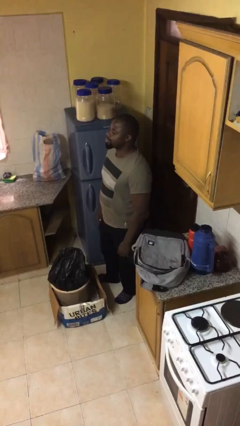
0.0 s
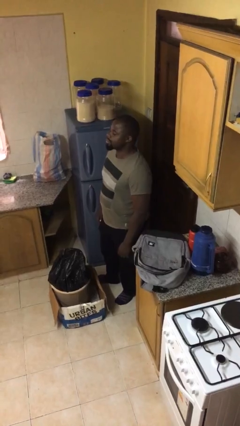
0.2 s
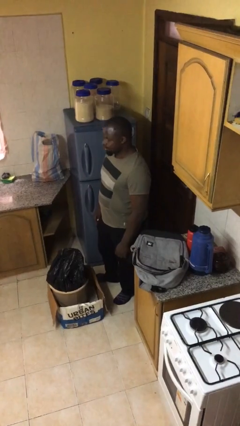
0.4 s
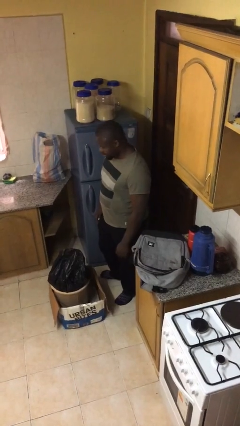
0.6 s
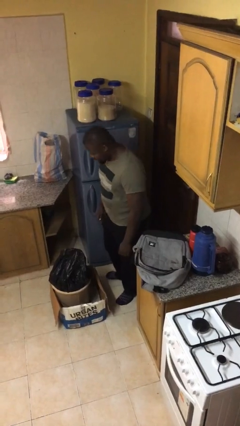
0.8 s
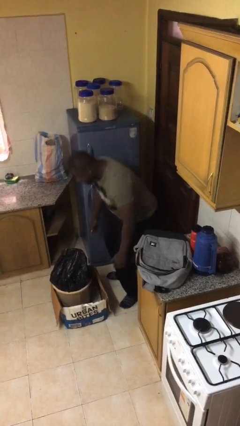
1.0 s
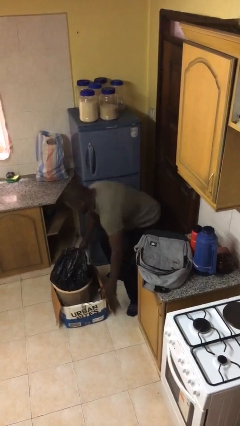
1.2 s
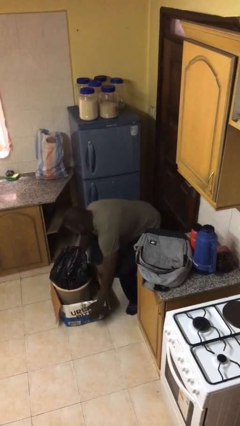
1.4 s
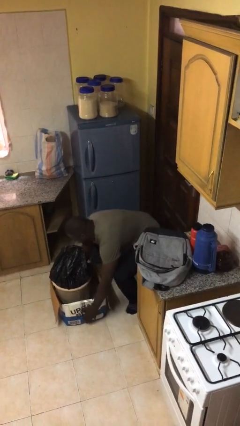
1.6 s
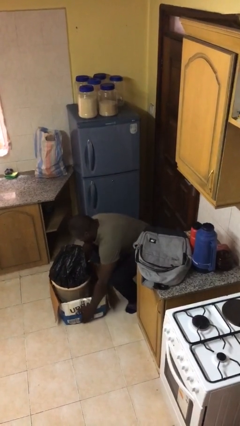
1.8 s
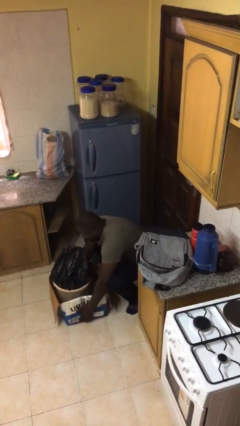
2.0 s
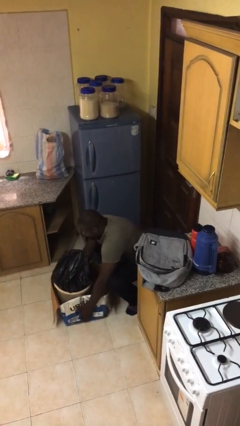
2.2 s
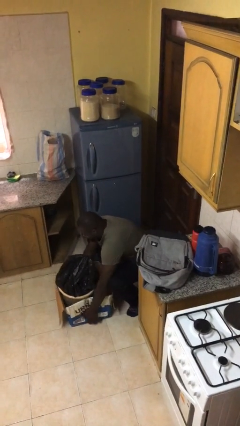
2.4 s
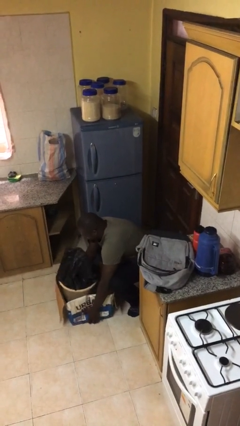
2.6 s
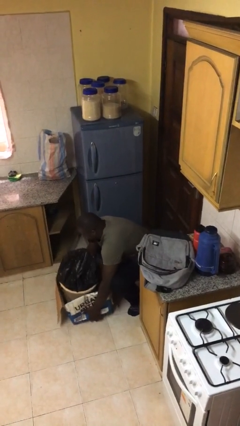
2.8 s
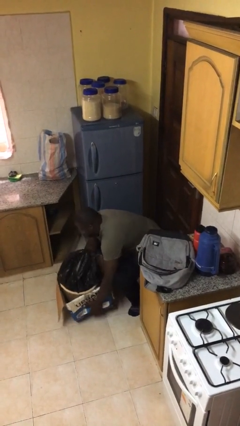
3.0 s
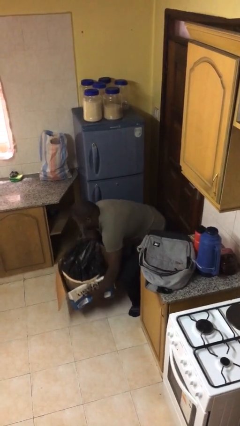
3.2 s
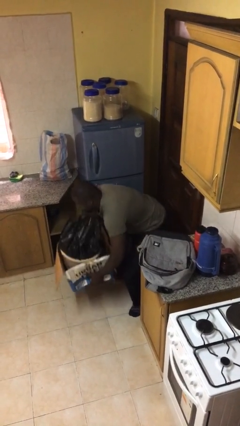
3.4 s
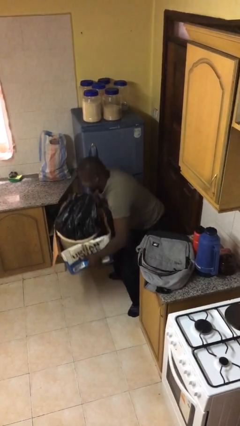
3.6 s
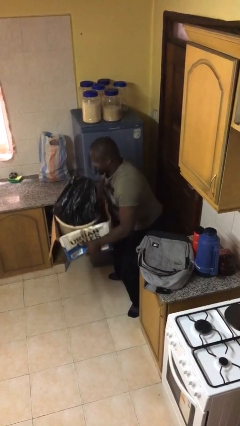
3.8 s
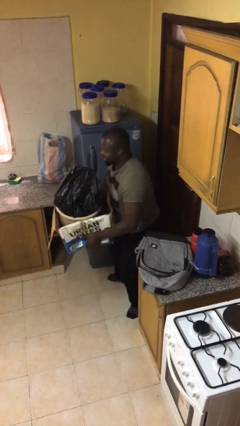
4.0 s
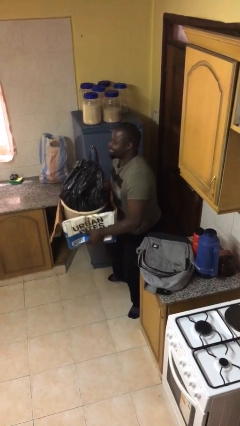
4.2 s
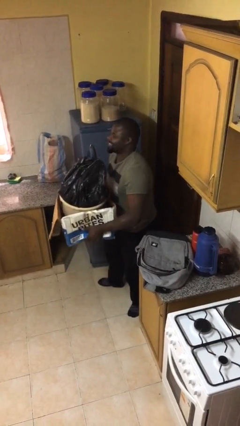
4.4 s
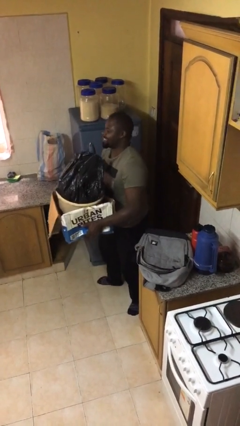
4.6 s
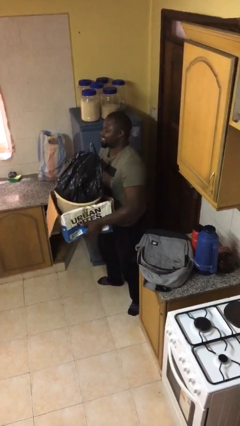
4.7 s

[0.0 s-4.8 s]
person picks up object from floor

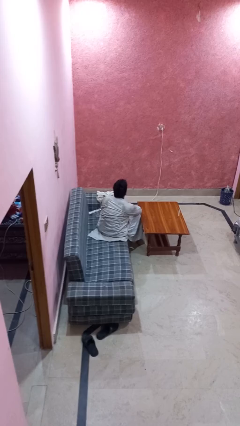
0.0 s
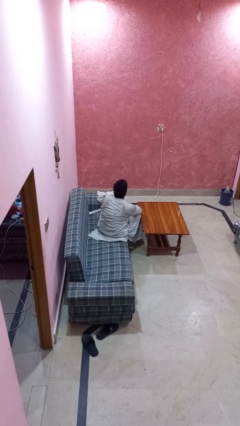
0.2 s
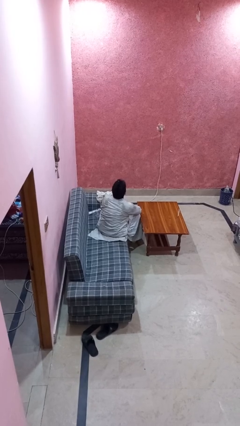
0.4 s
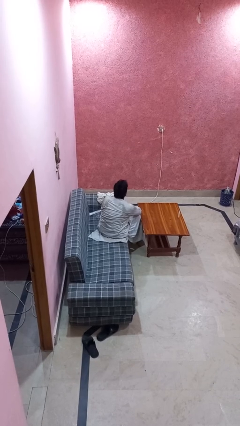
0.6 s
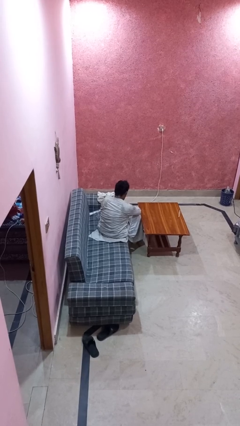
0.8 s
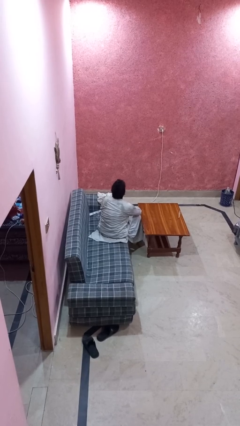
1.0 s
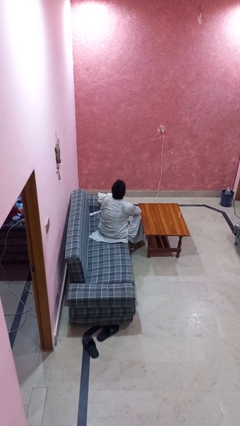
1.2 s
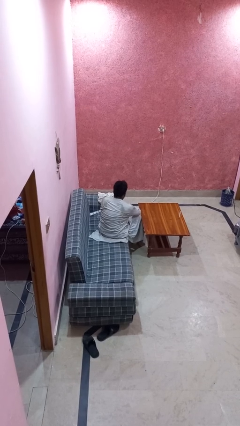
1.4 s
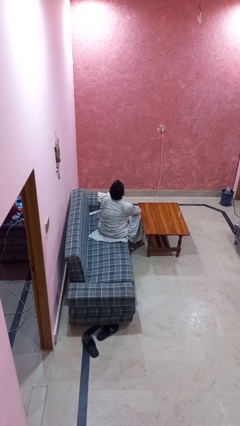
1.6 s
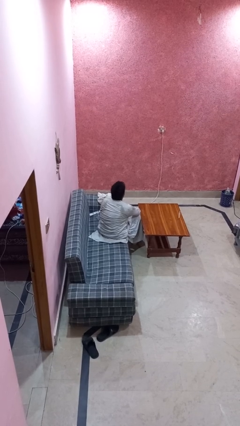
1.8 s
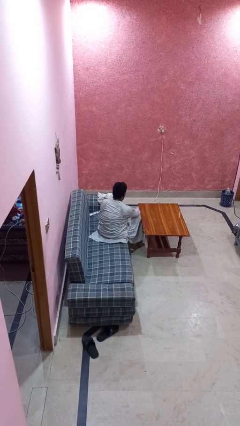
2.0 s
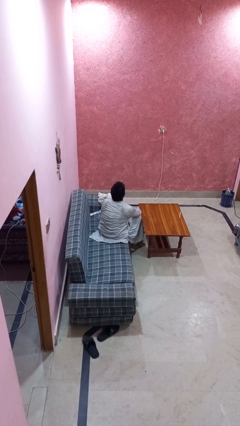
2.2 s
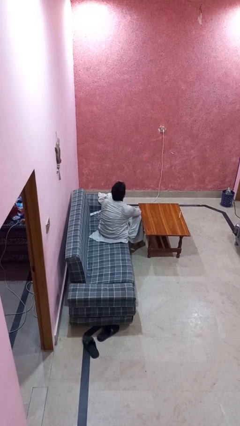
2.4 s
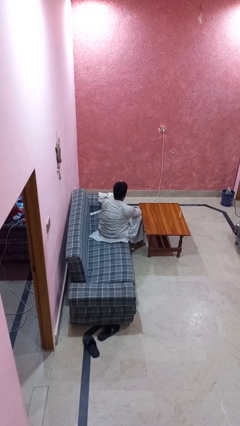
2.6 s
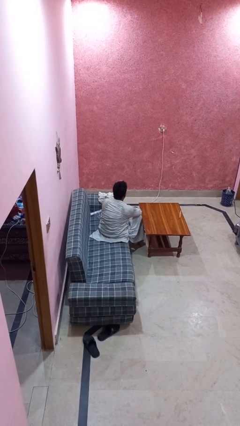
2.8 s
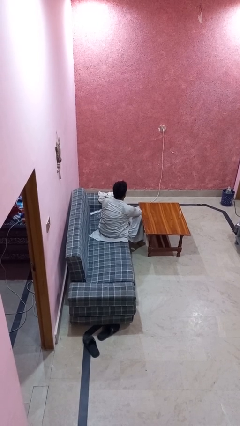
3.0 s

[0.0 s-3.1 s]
person nods head

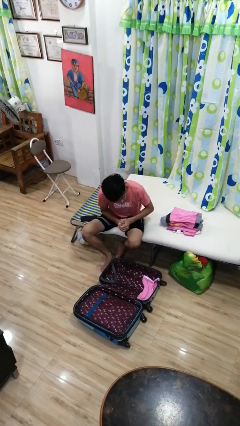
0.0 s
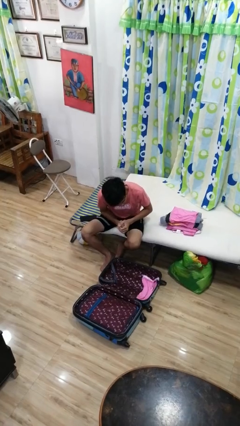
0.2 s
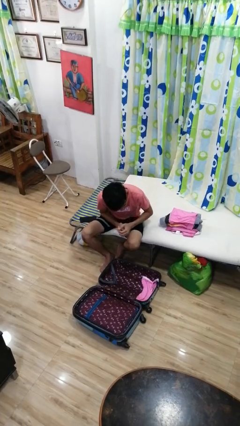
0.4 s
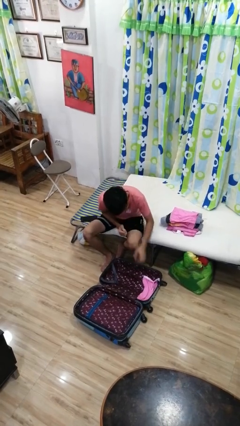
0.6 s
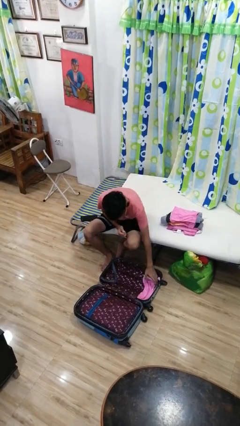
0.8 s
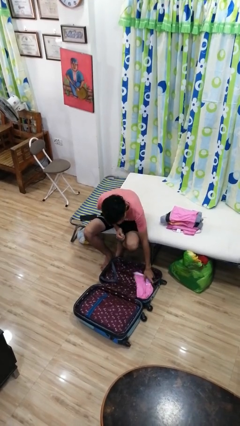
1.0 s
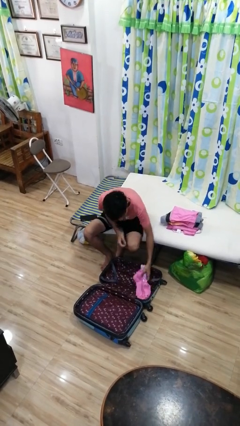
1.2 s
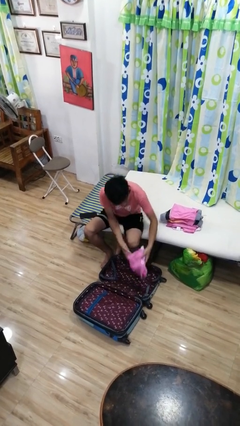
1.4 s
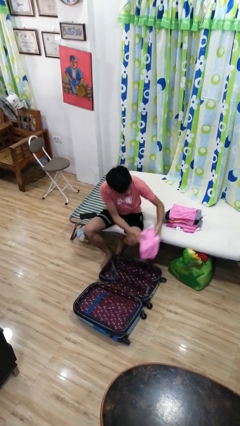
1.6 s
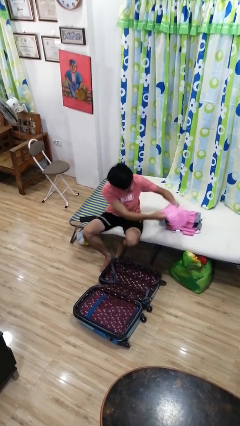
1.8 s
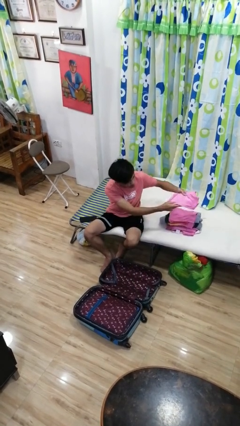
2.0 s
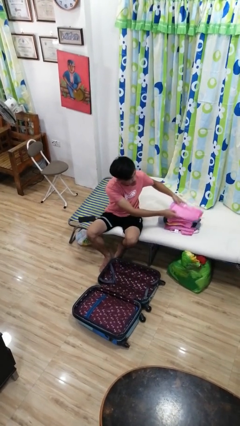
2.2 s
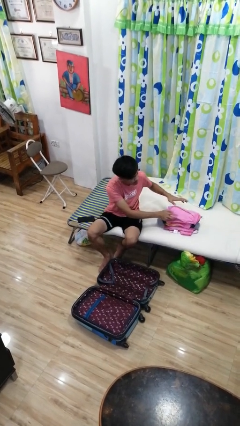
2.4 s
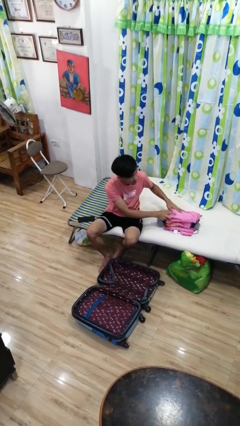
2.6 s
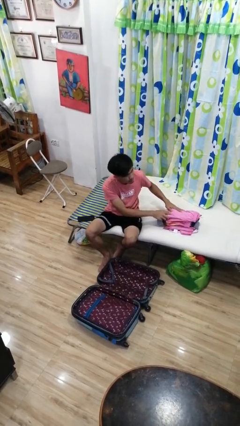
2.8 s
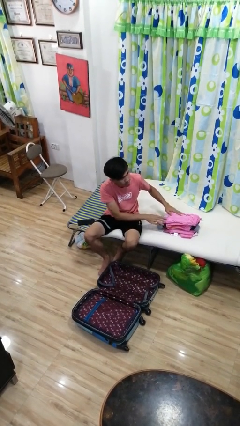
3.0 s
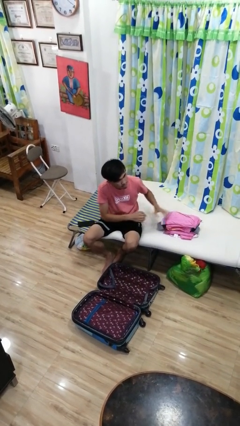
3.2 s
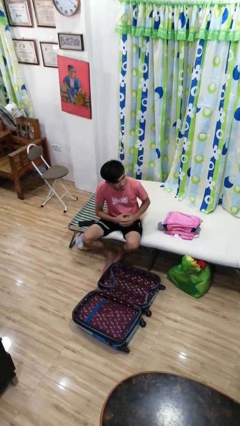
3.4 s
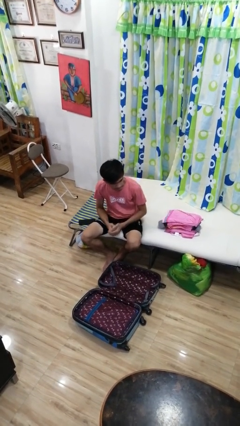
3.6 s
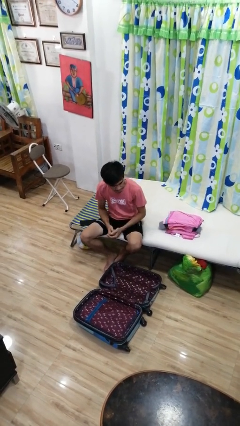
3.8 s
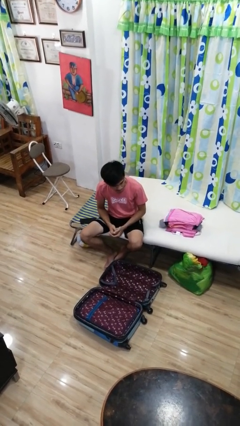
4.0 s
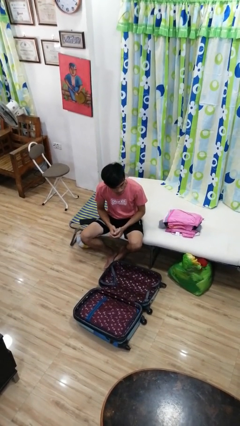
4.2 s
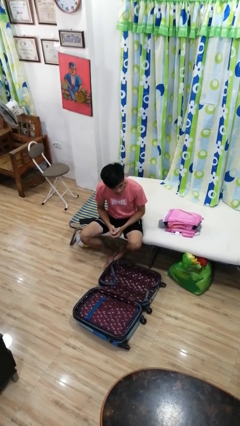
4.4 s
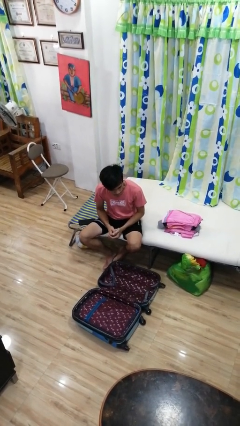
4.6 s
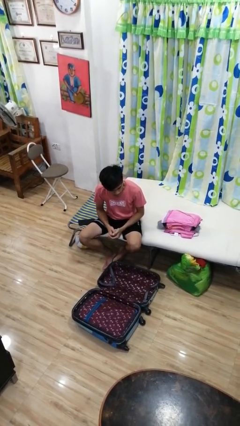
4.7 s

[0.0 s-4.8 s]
person unloads clothes from suitcase

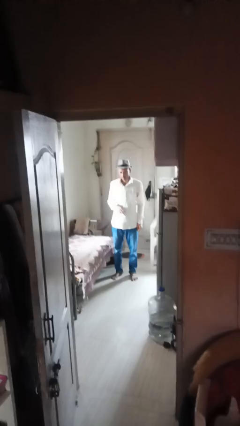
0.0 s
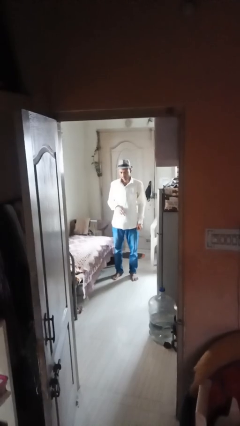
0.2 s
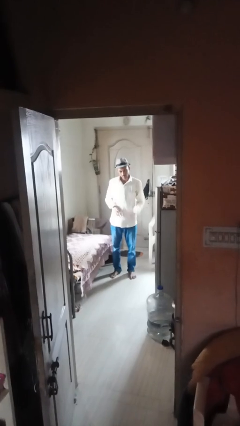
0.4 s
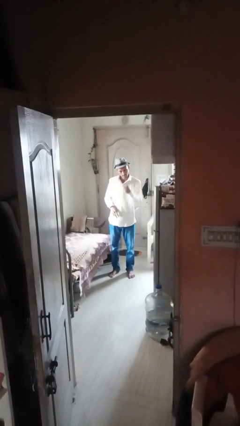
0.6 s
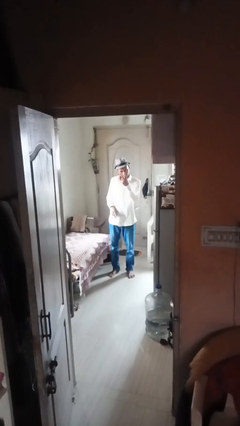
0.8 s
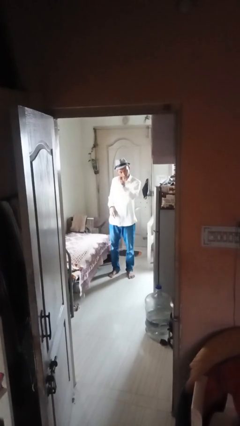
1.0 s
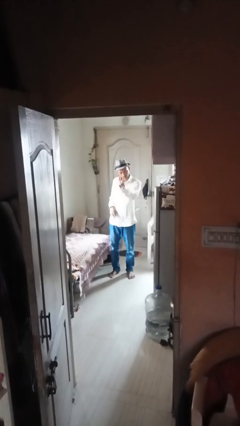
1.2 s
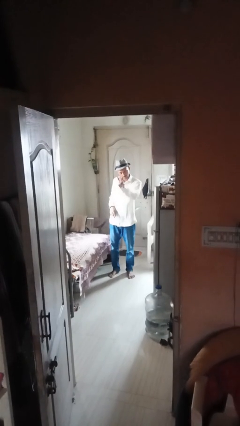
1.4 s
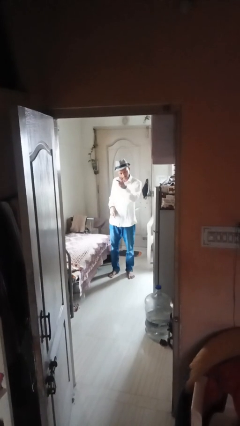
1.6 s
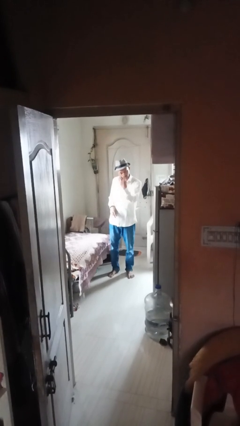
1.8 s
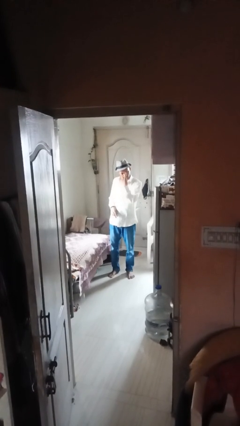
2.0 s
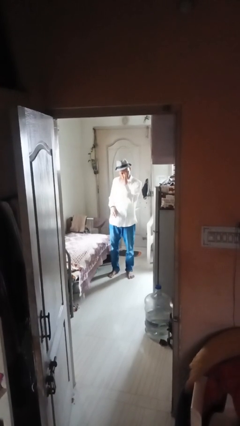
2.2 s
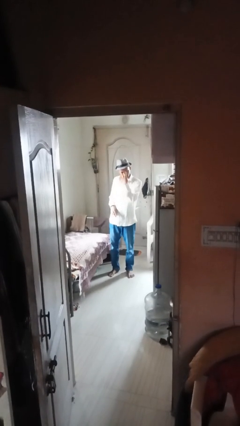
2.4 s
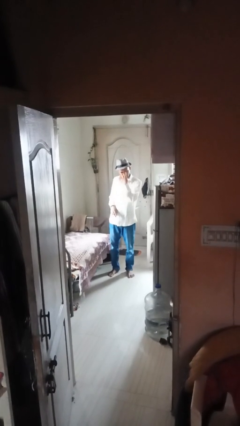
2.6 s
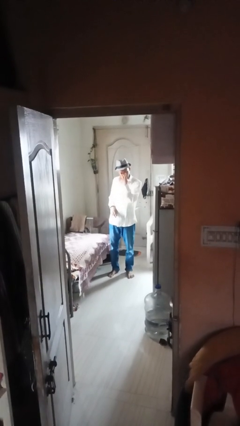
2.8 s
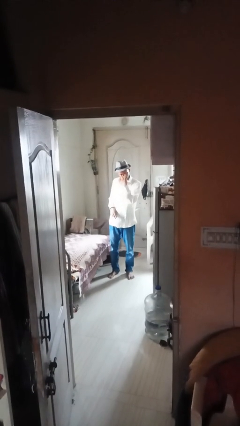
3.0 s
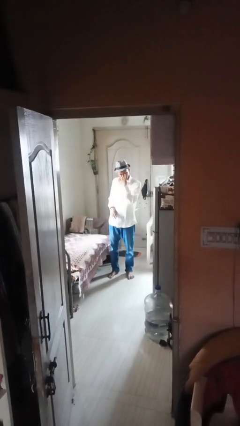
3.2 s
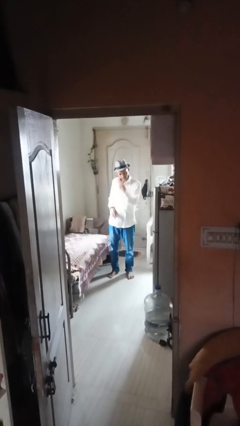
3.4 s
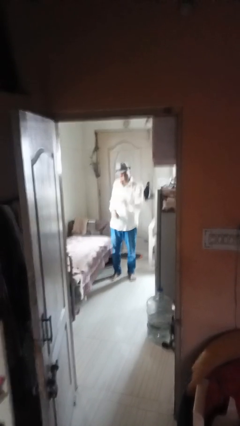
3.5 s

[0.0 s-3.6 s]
person gestures watch closely

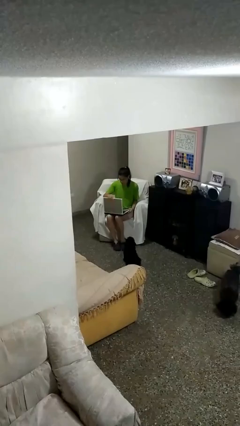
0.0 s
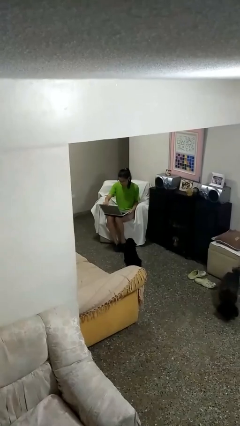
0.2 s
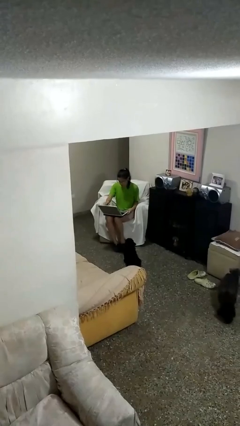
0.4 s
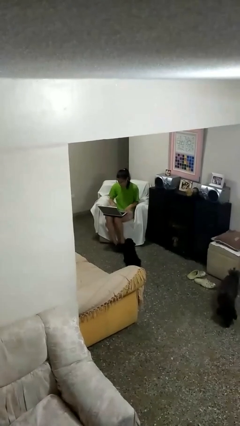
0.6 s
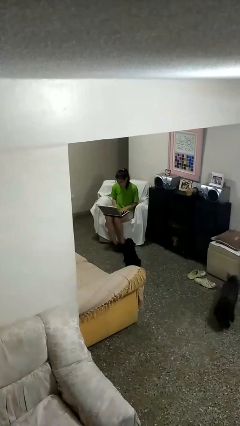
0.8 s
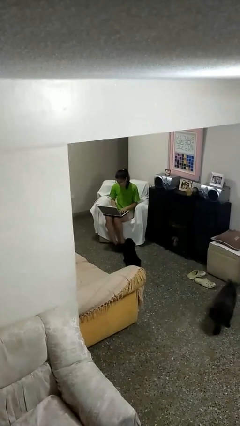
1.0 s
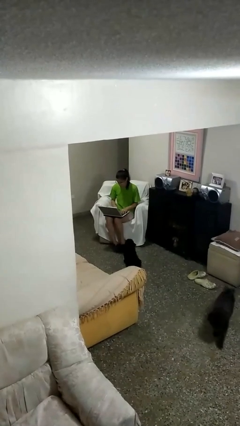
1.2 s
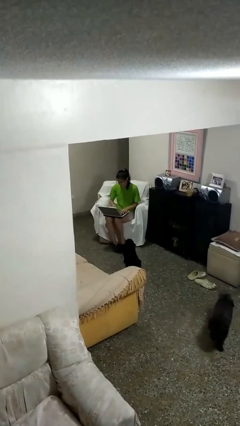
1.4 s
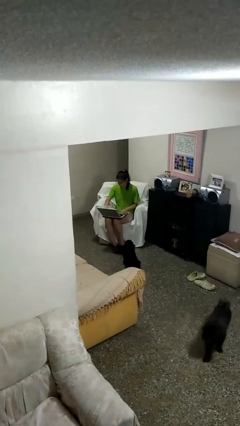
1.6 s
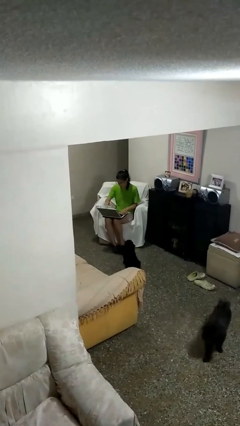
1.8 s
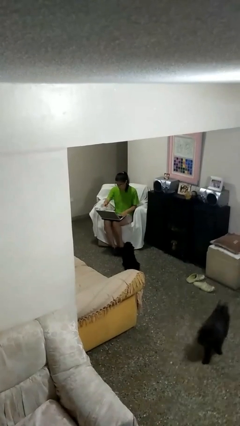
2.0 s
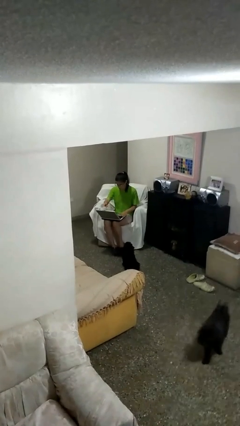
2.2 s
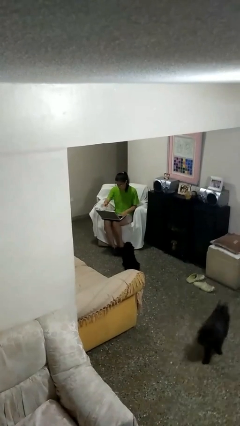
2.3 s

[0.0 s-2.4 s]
person interacts with laptop
